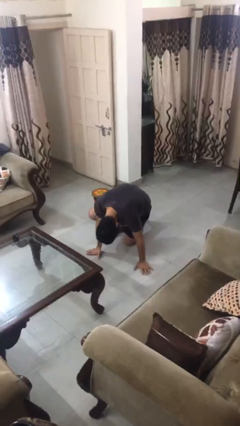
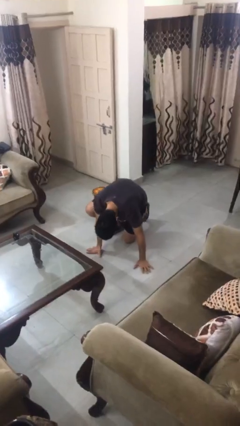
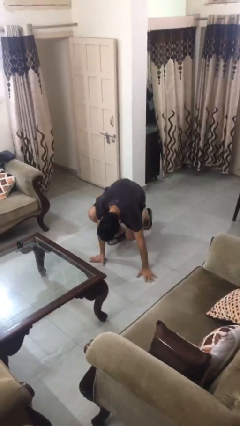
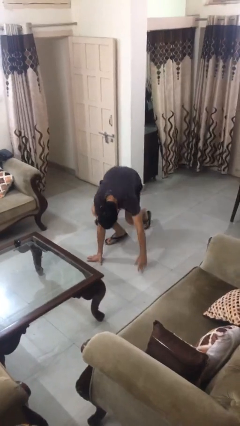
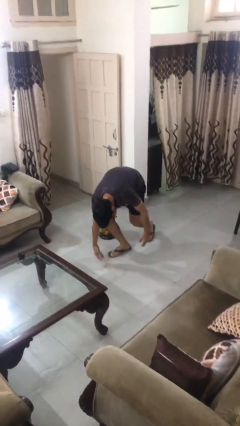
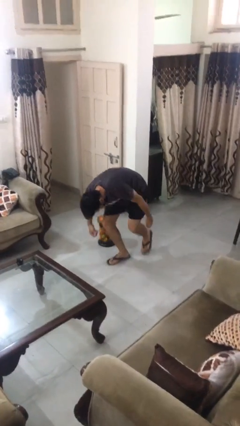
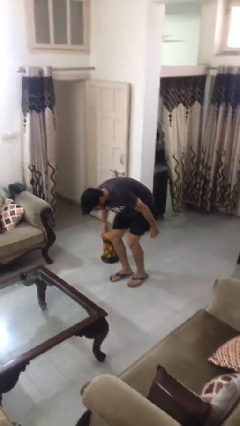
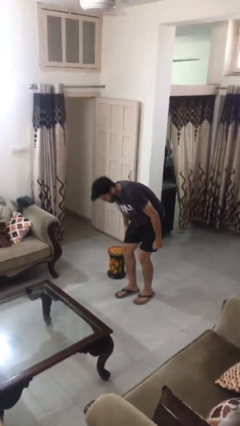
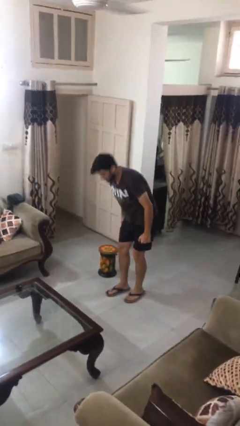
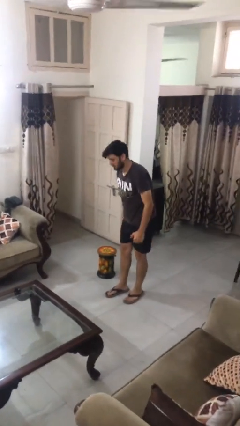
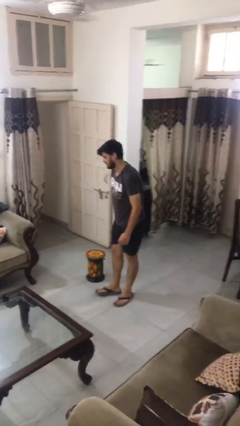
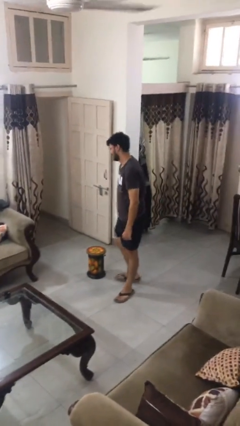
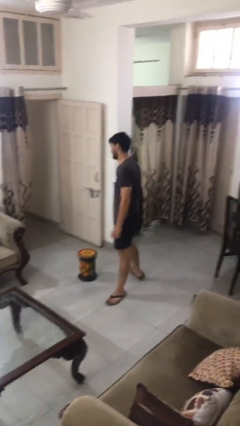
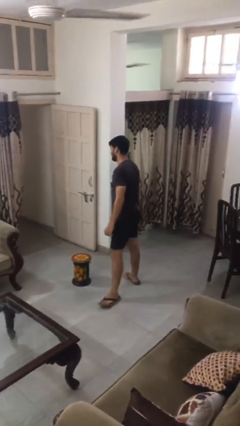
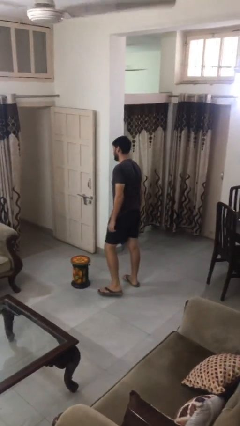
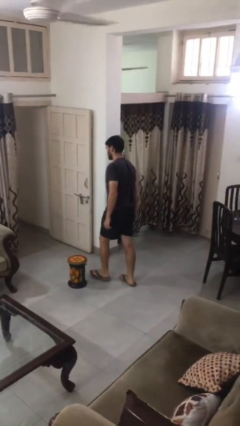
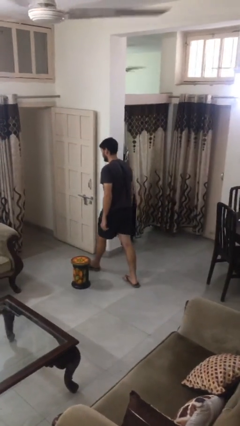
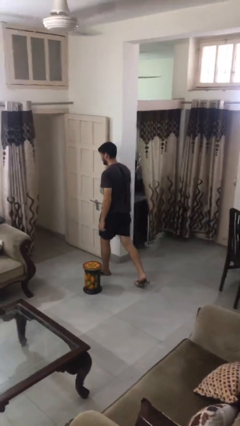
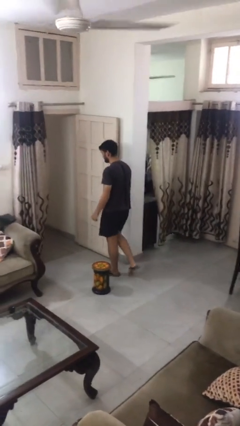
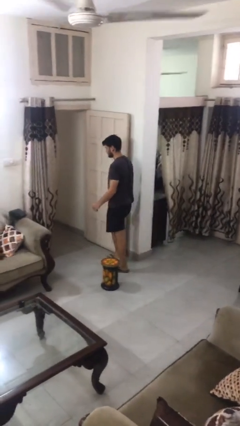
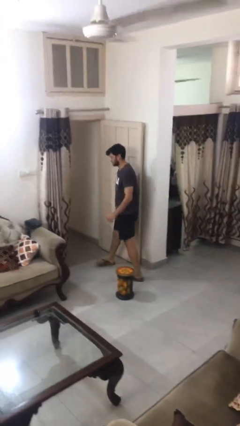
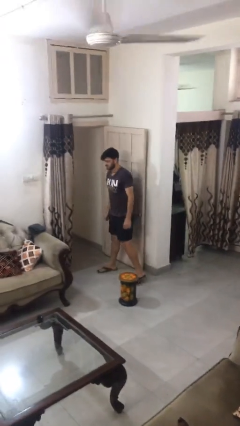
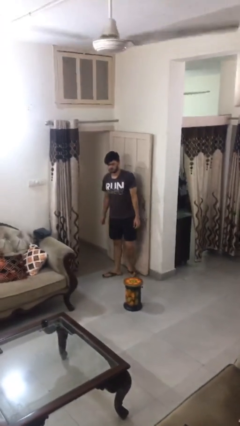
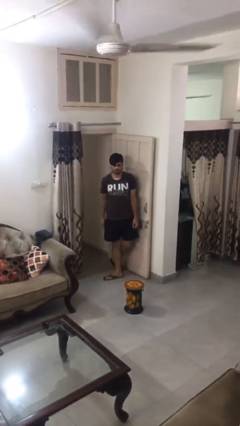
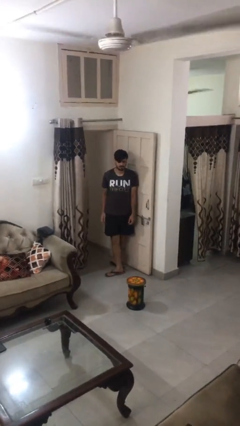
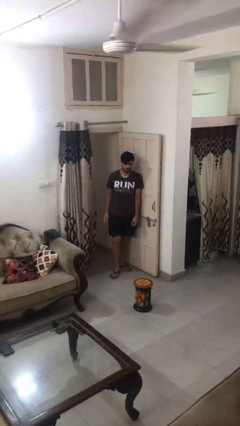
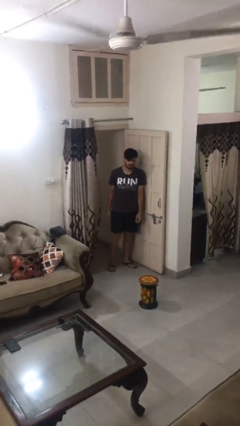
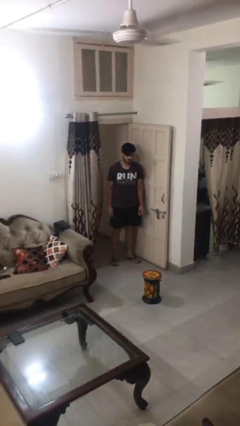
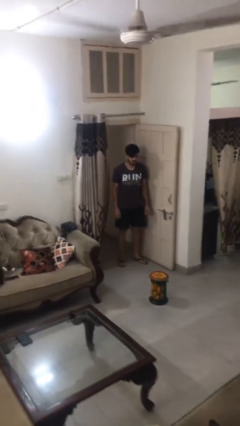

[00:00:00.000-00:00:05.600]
person stands up from floor

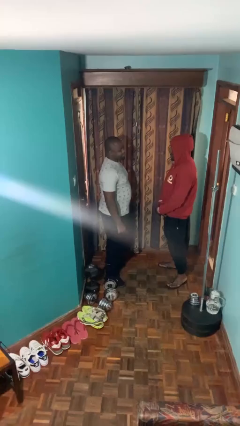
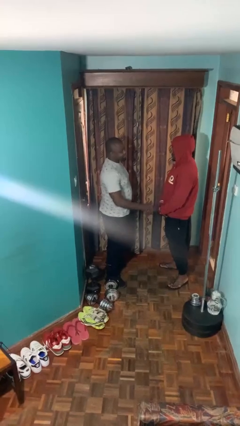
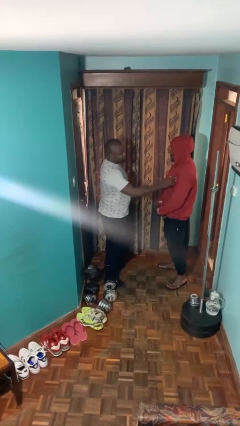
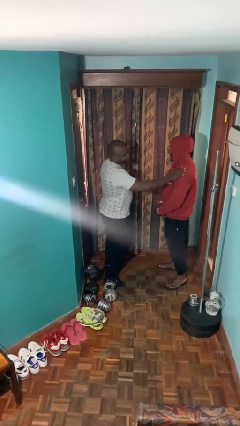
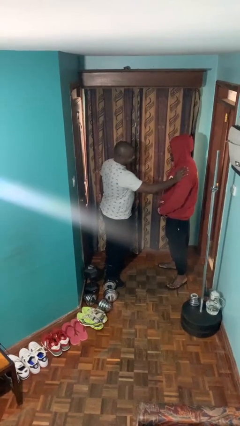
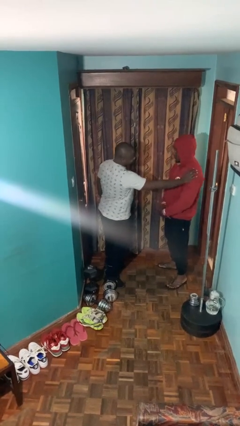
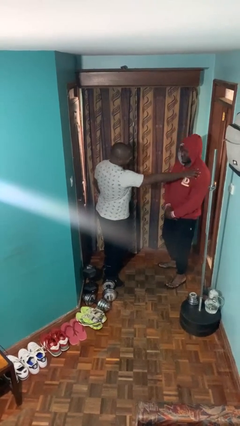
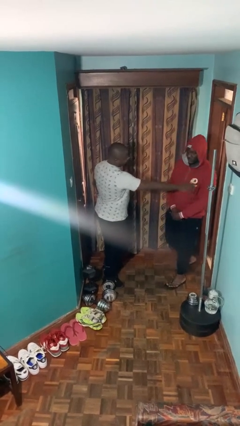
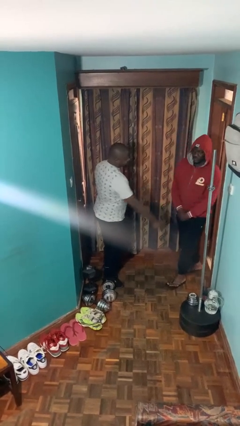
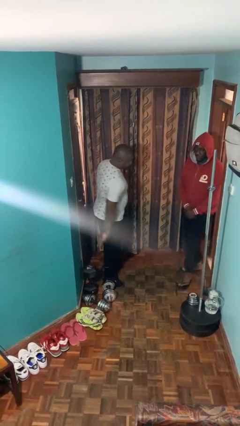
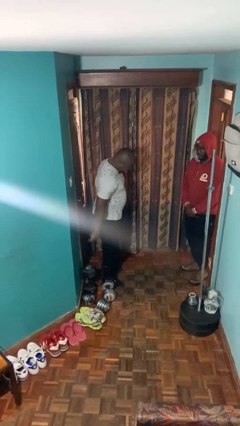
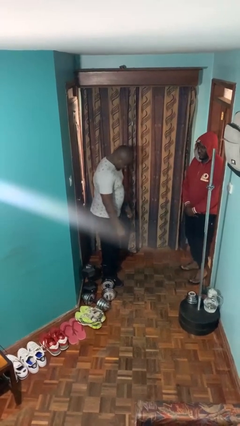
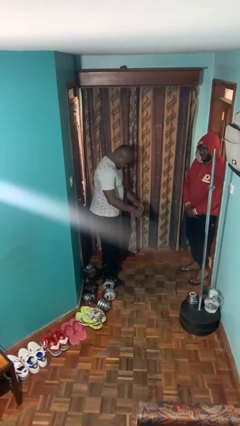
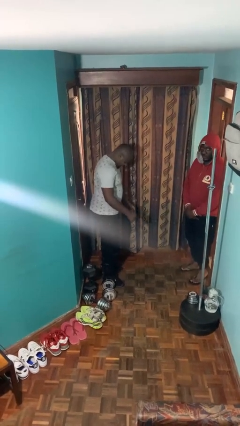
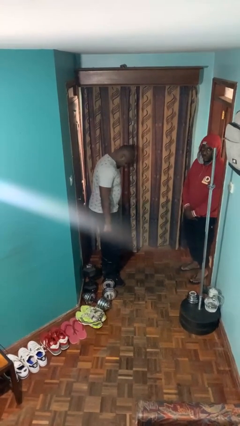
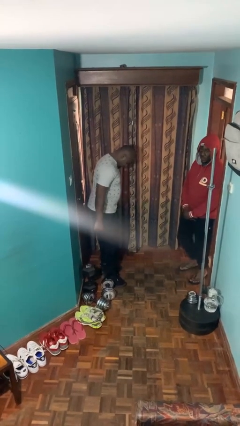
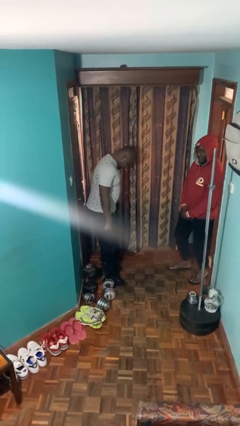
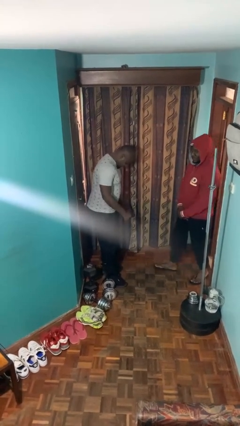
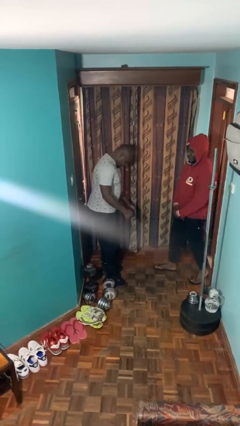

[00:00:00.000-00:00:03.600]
person shoves person

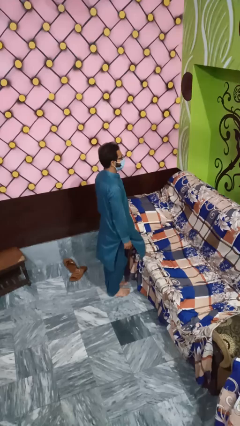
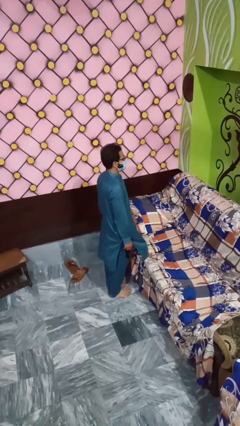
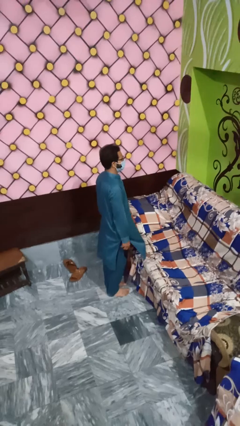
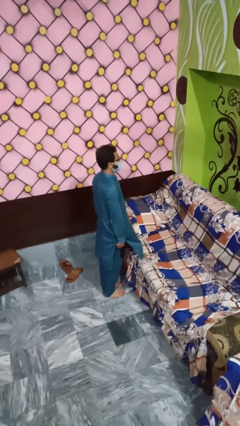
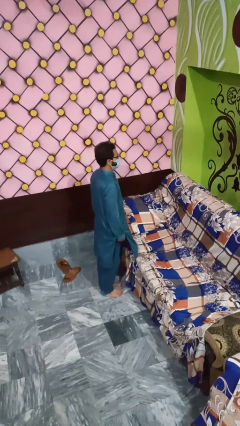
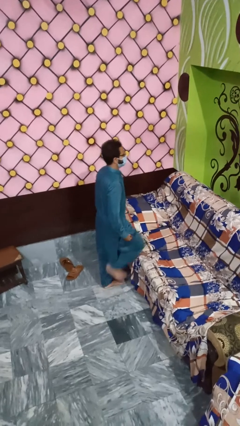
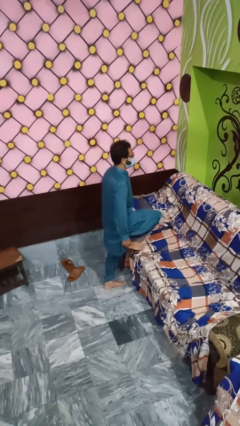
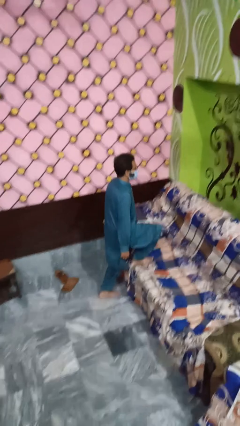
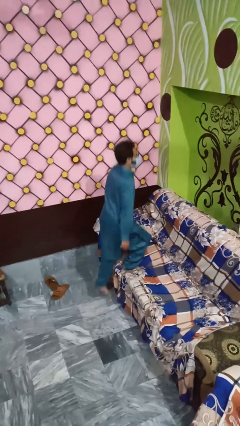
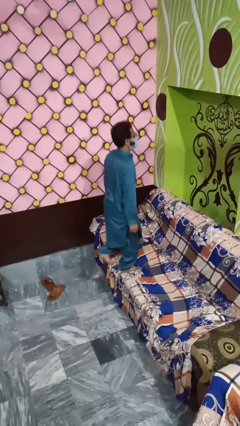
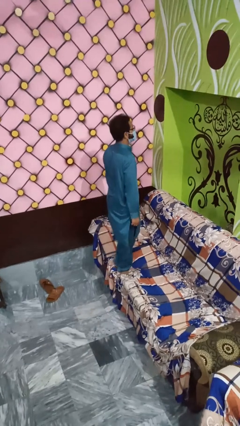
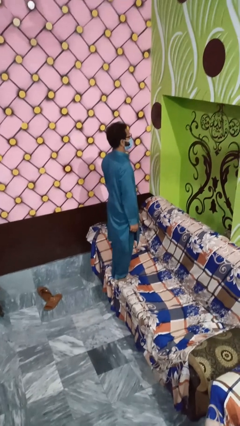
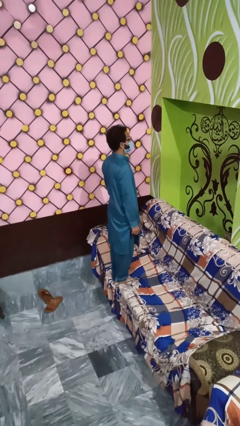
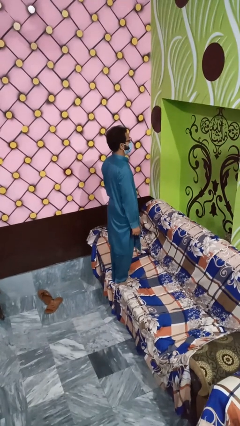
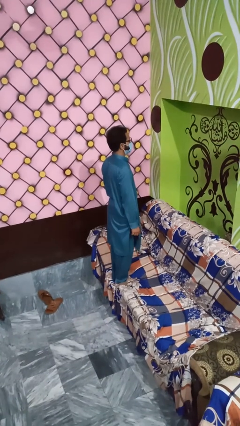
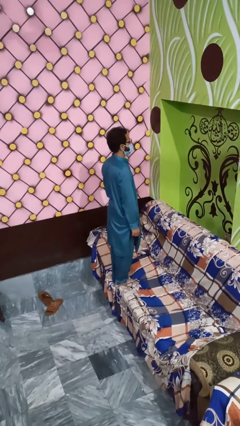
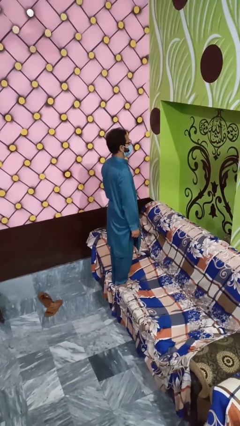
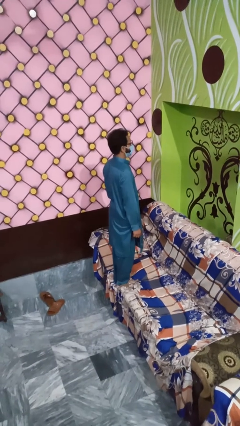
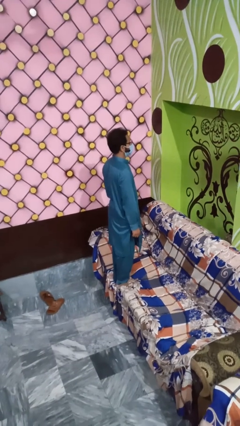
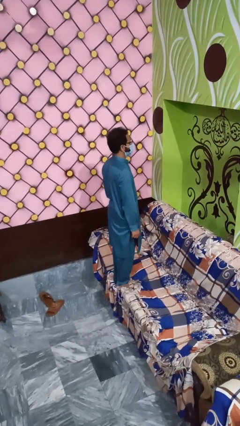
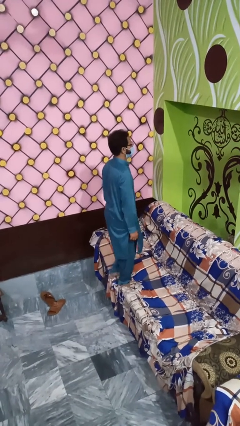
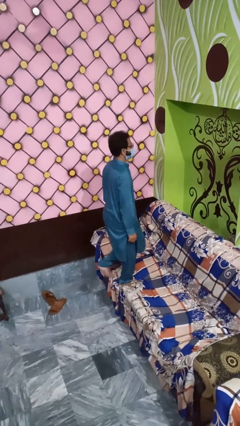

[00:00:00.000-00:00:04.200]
person climbs on couch

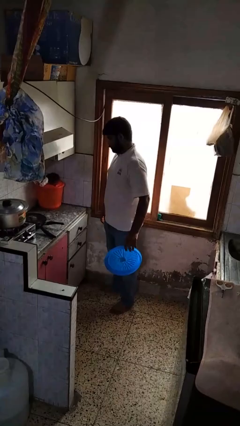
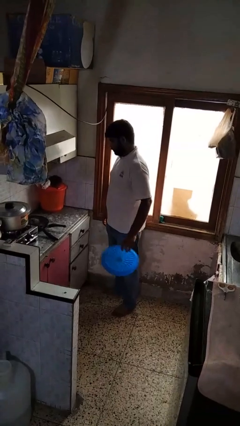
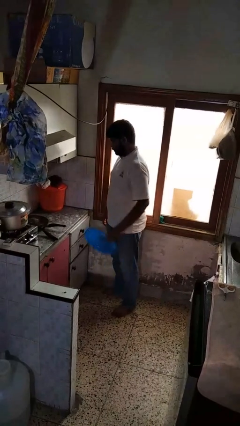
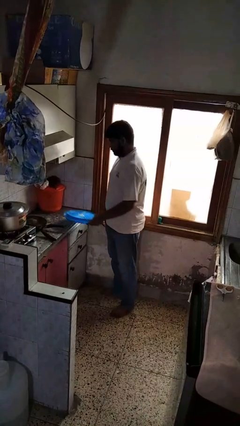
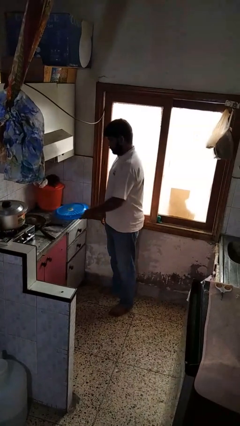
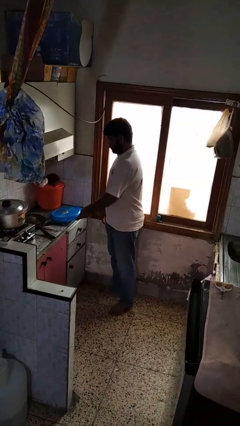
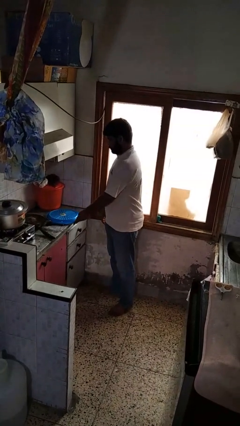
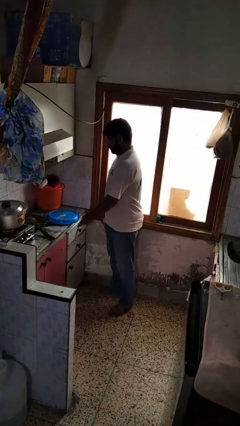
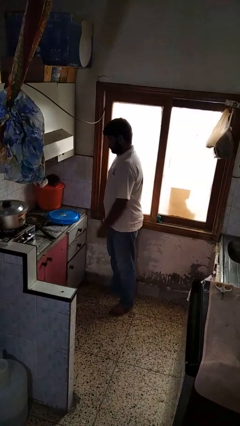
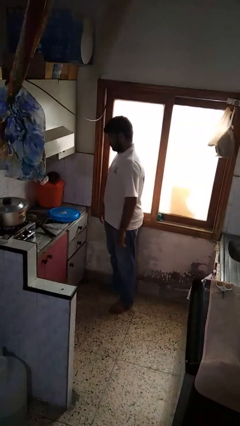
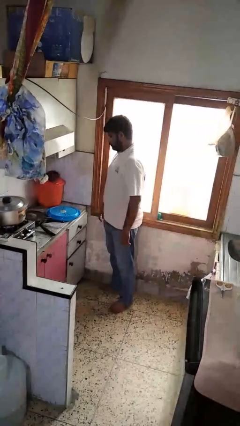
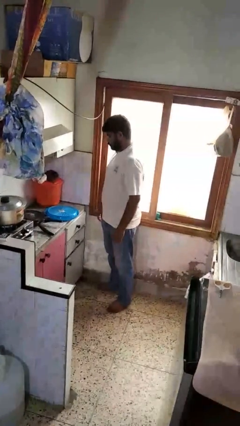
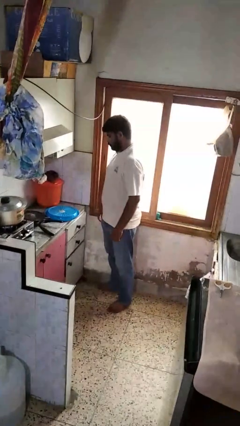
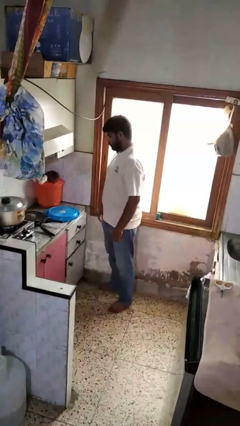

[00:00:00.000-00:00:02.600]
person puts down object on countertop

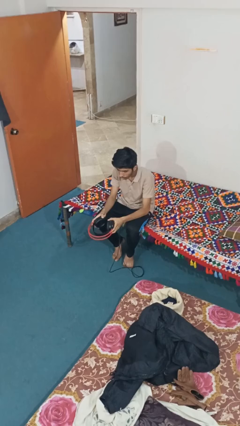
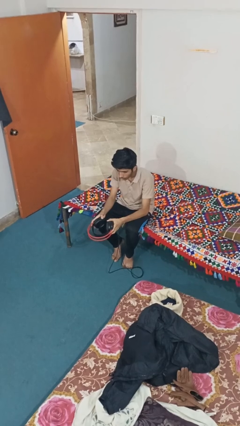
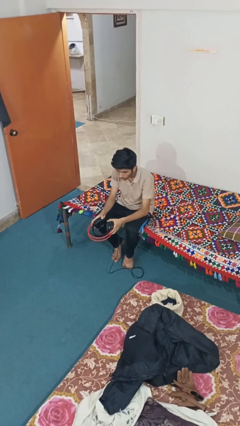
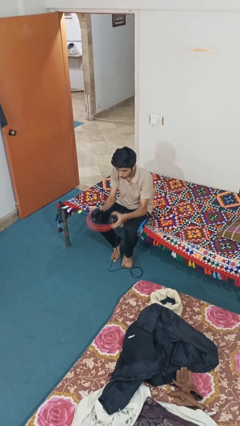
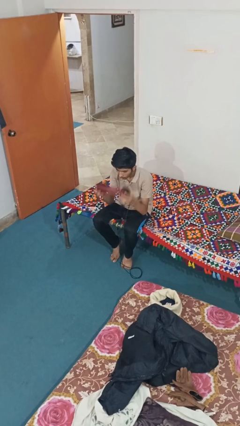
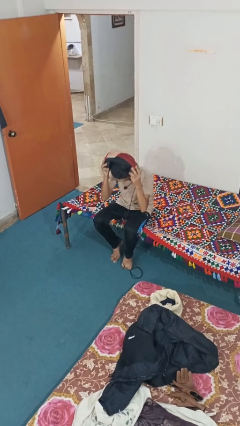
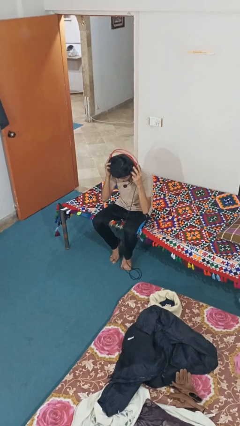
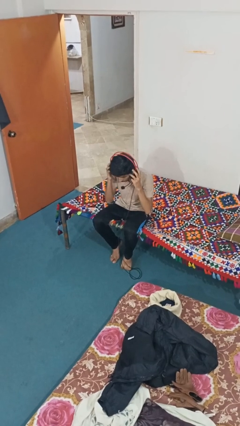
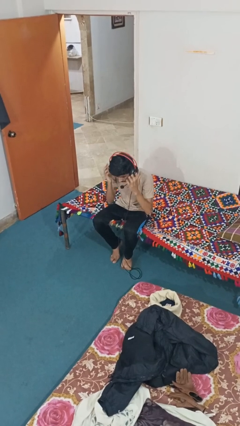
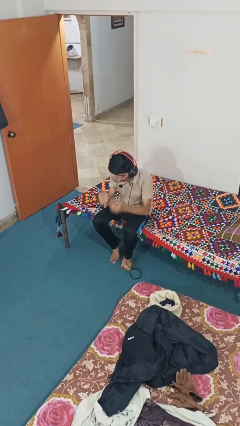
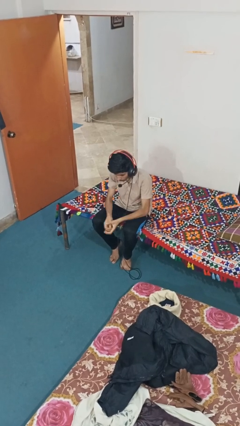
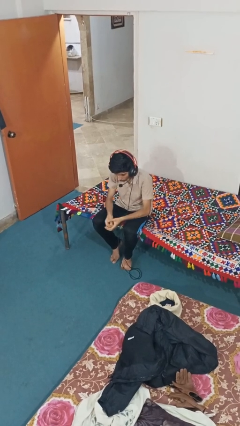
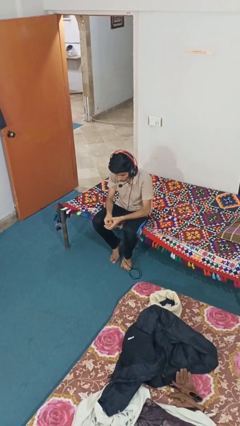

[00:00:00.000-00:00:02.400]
person puts on headphones
